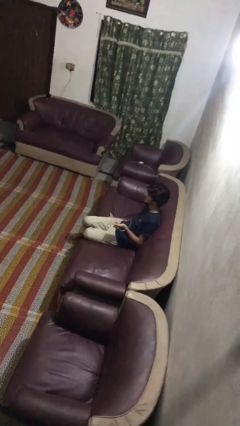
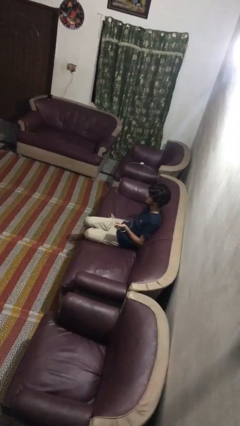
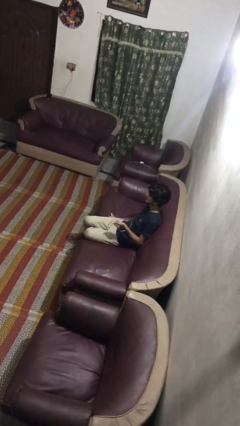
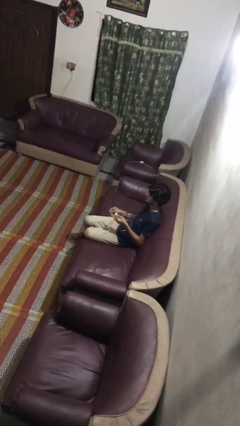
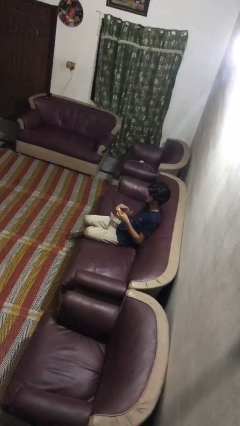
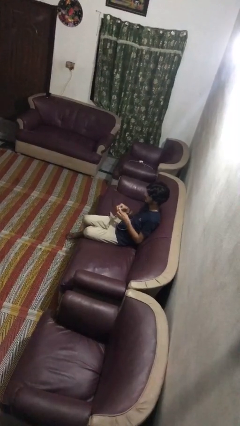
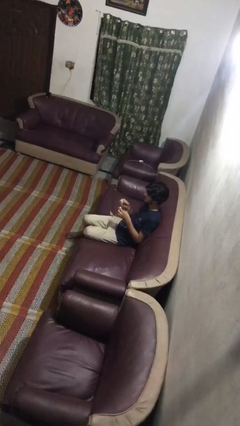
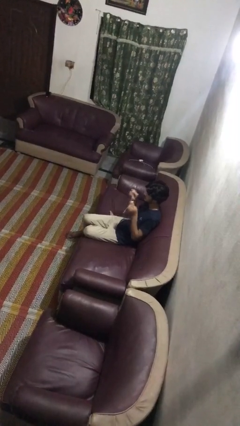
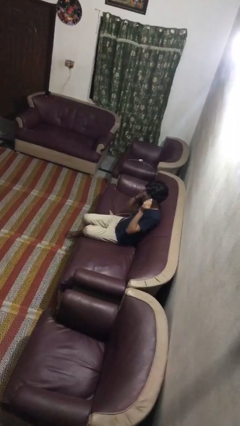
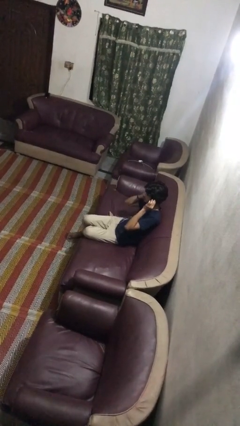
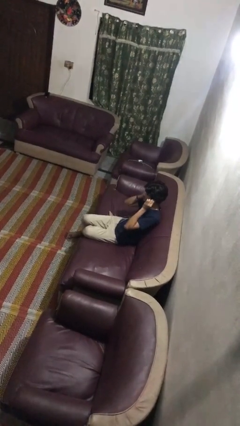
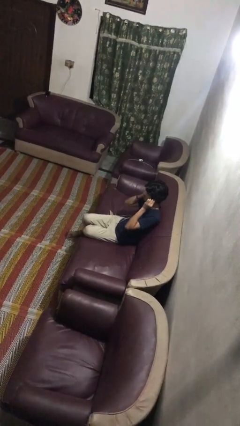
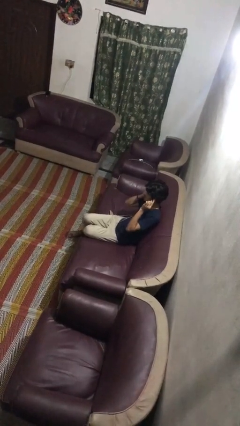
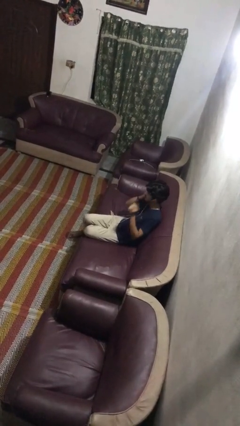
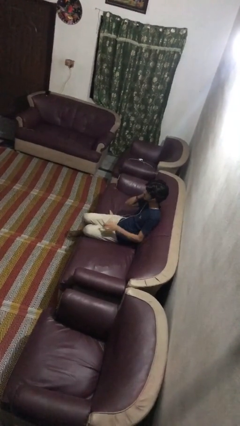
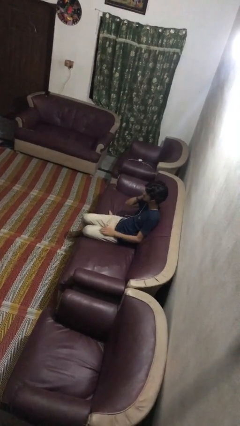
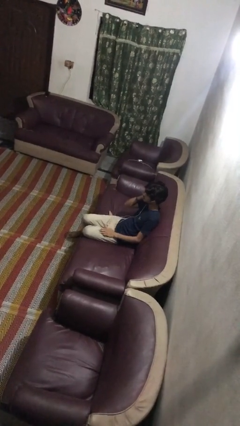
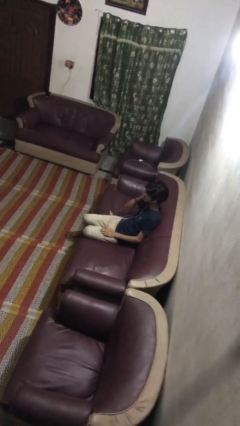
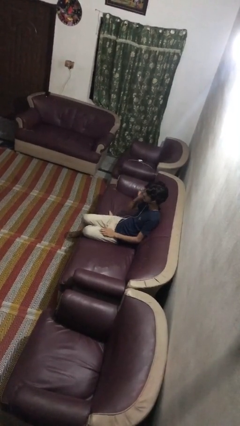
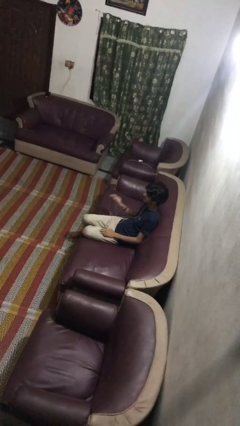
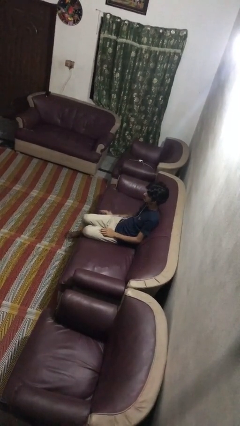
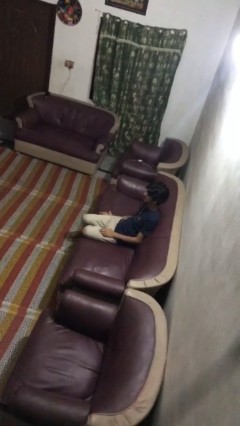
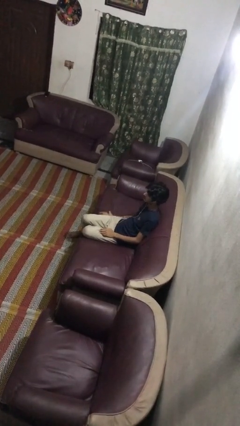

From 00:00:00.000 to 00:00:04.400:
person puts on headphones

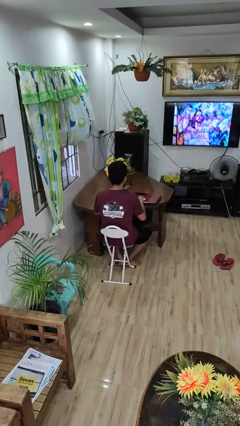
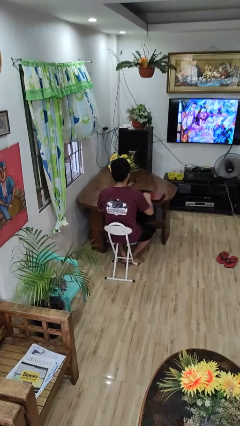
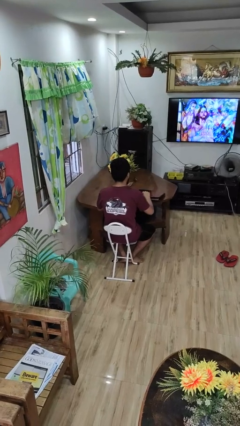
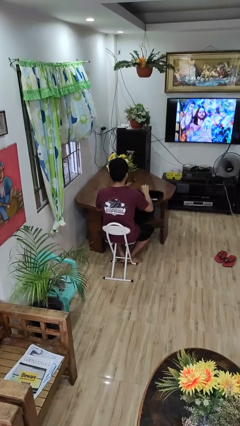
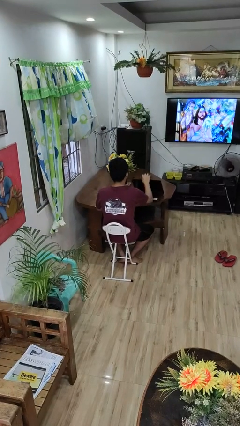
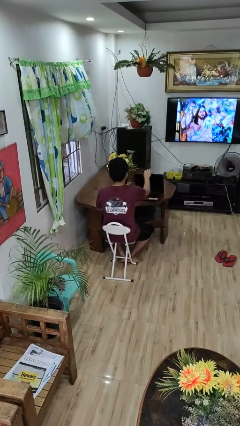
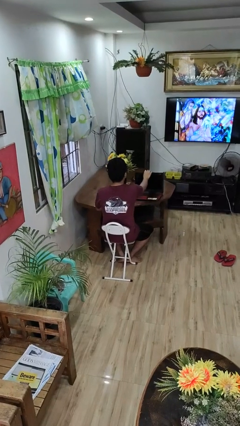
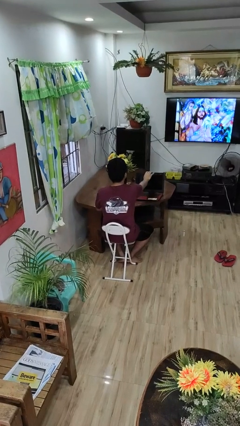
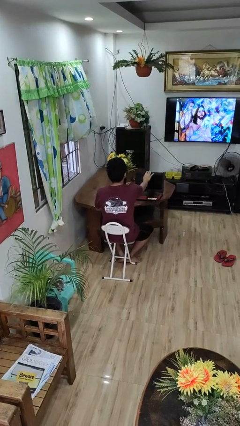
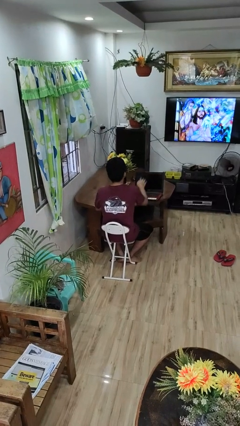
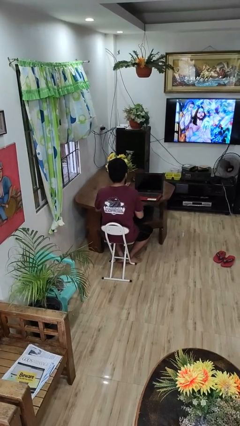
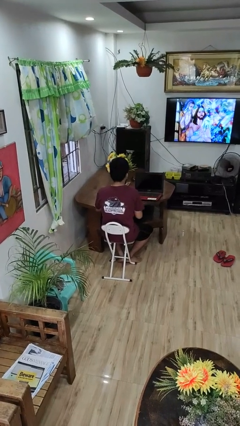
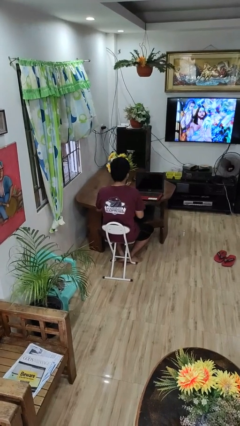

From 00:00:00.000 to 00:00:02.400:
person opens laptop

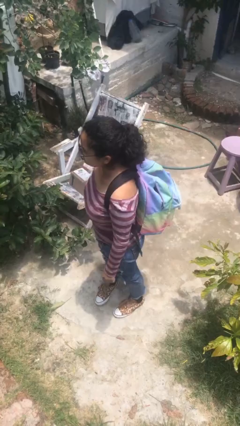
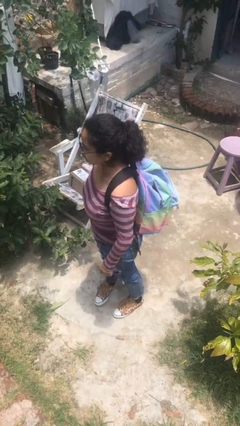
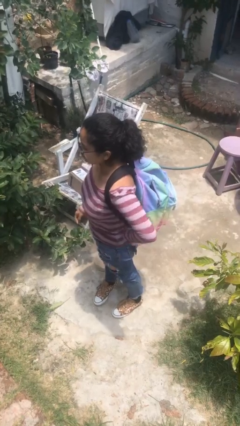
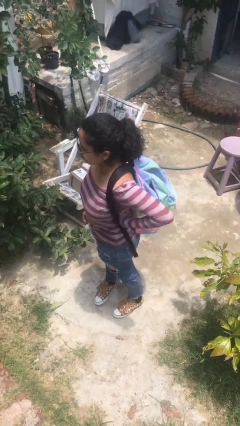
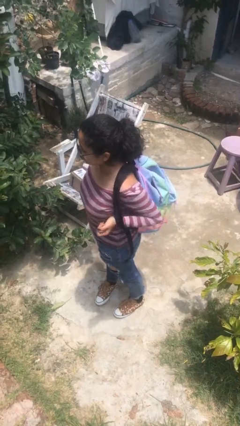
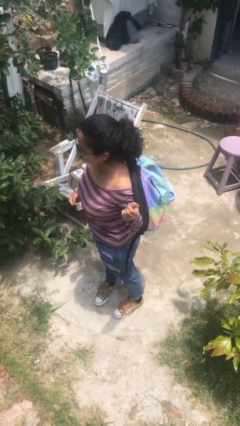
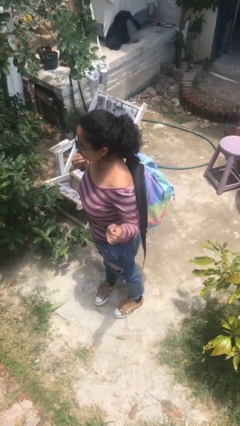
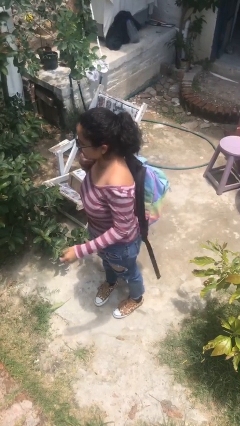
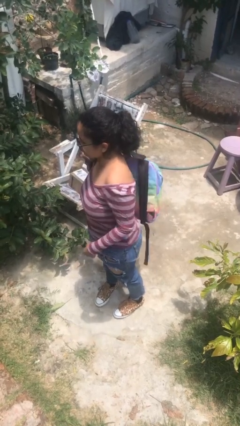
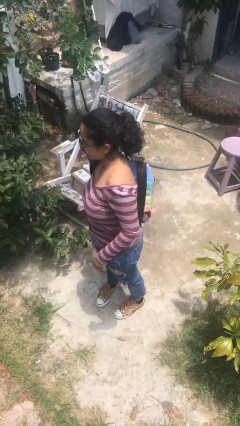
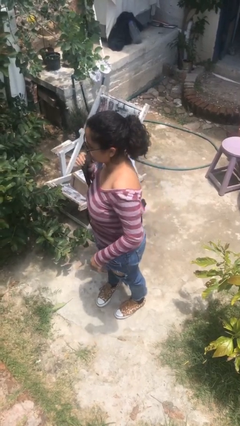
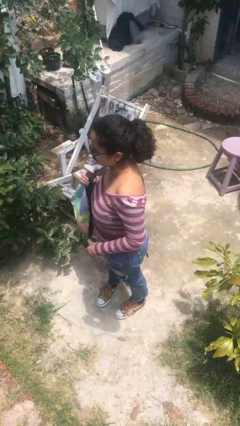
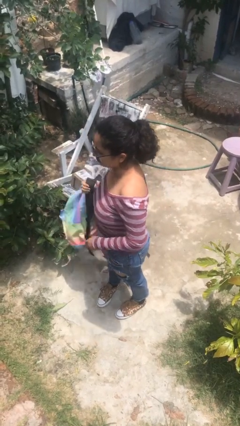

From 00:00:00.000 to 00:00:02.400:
person takes off backpack

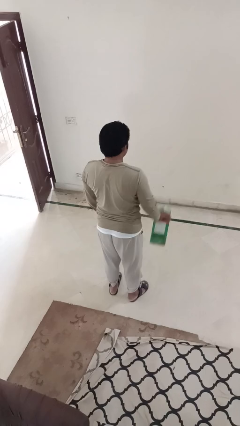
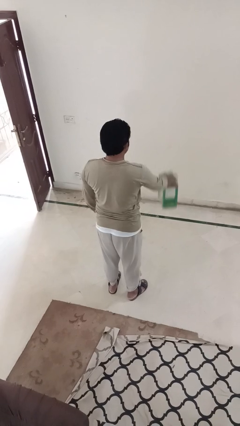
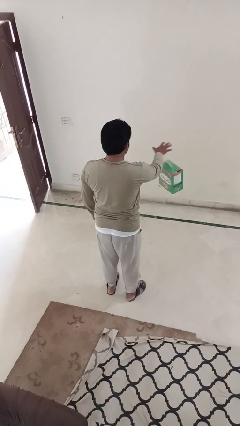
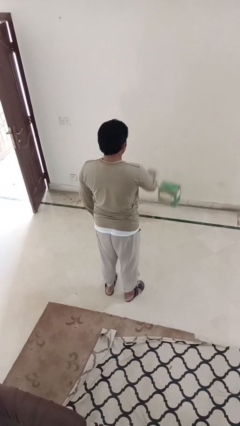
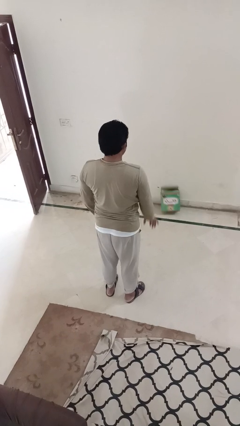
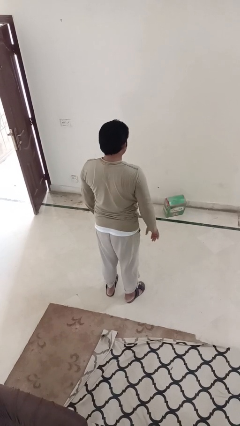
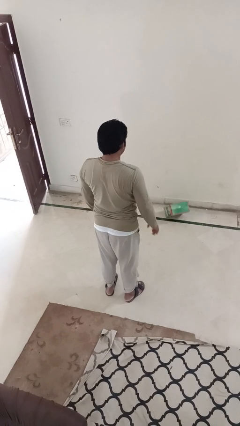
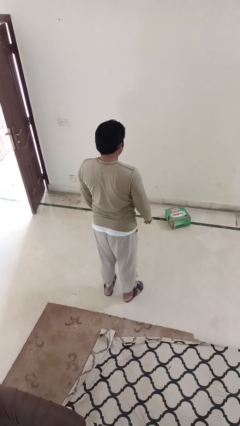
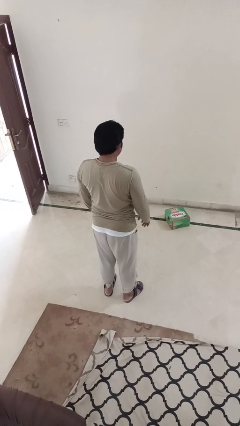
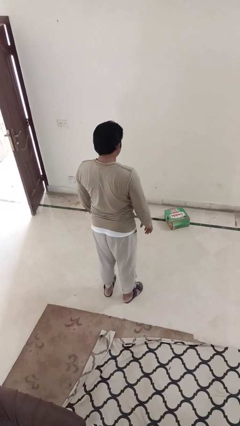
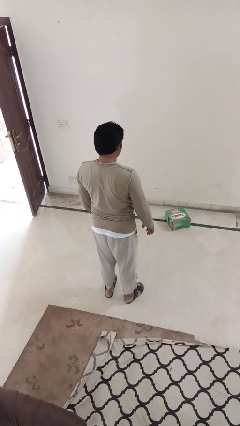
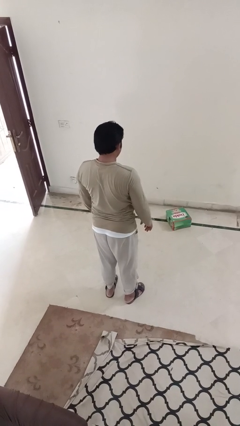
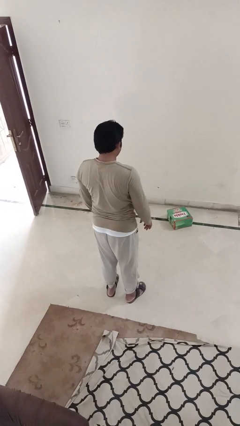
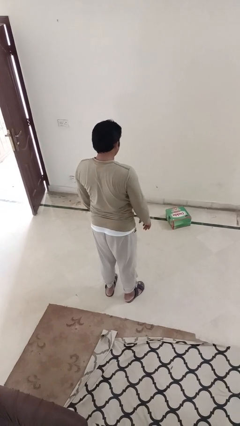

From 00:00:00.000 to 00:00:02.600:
person throws object to ground

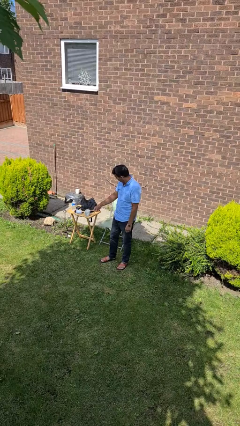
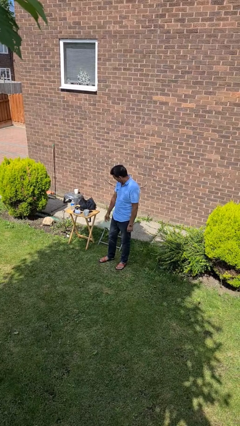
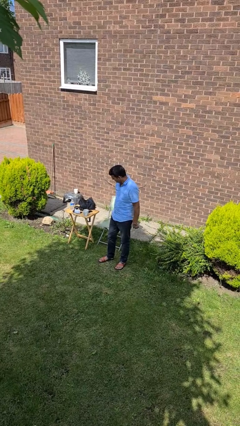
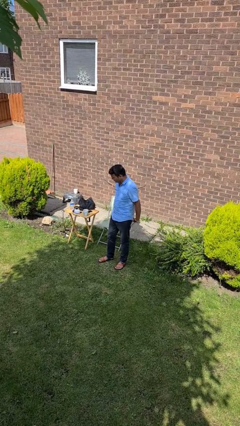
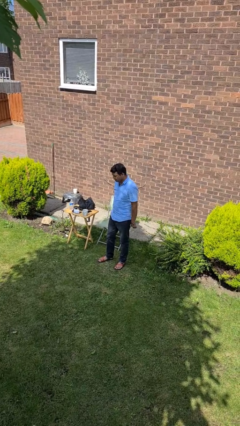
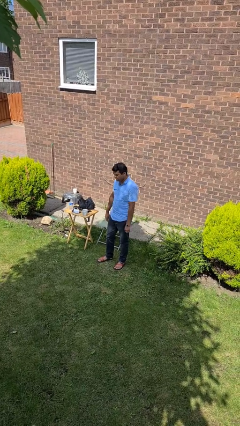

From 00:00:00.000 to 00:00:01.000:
person snaps fingers

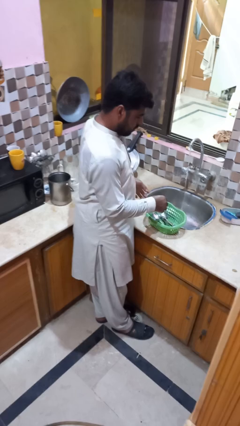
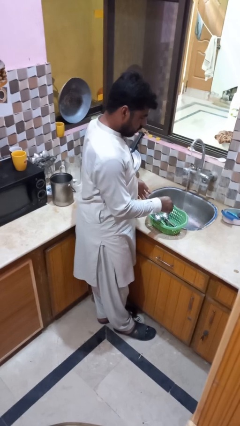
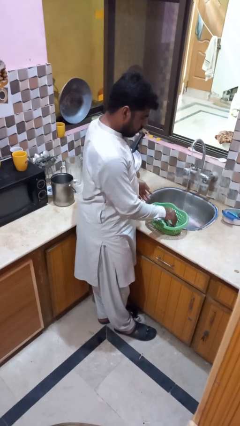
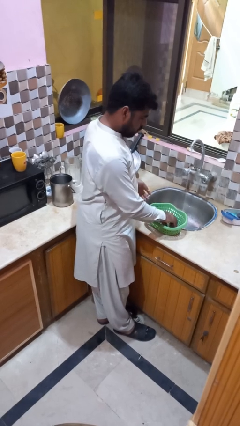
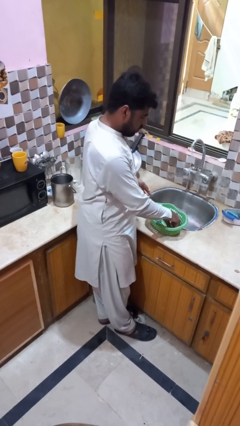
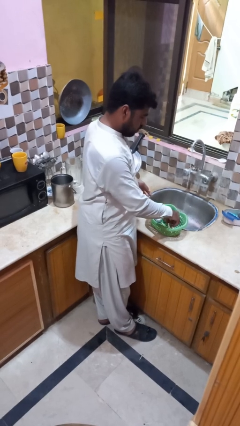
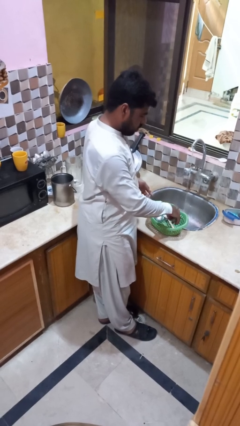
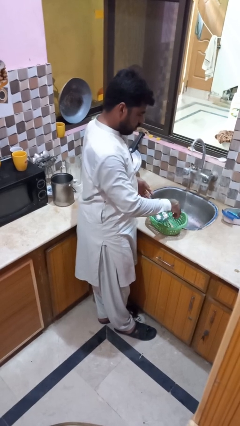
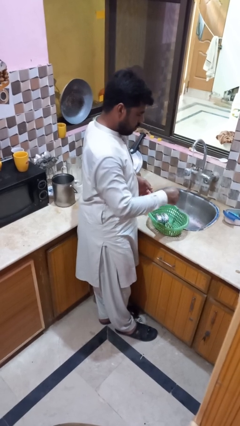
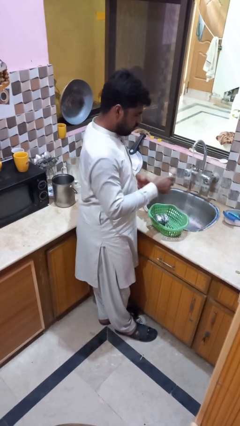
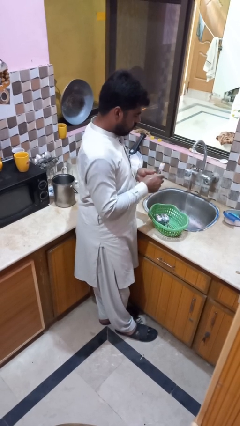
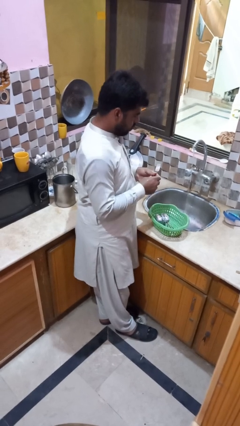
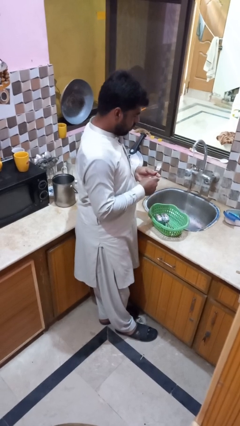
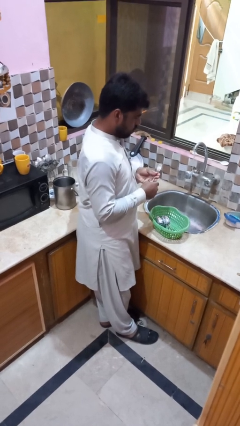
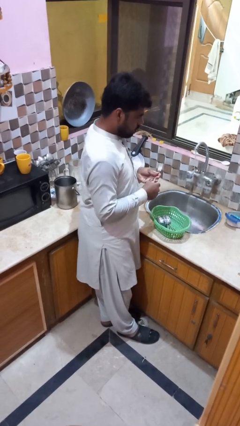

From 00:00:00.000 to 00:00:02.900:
person unloads dishwasher

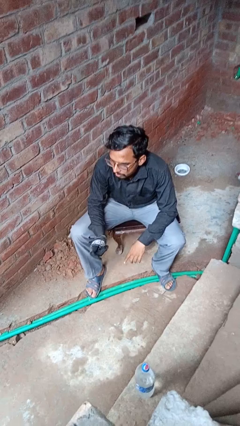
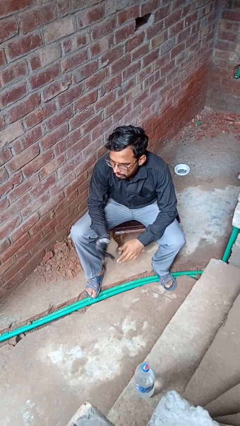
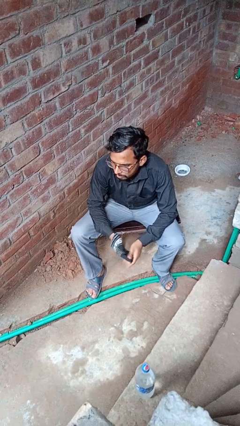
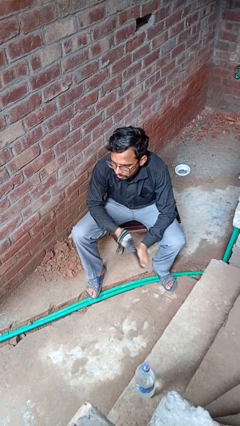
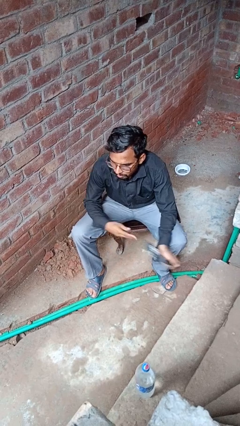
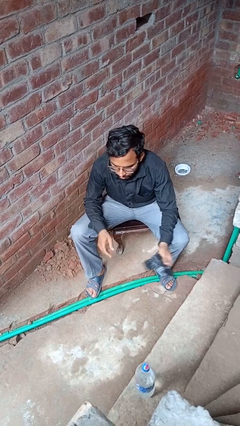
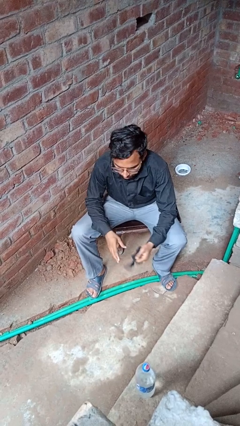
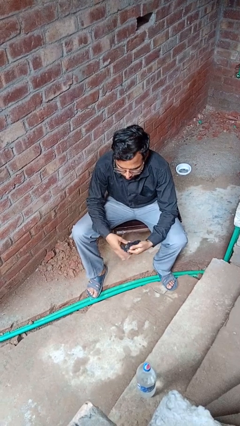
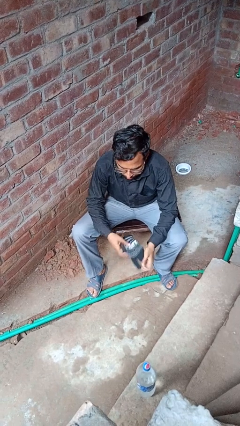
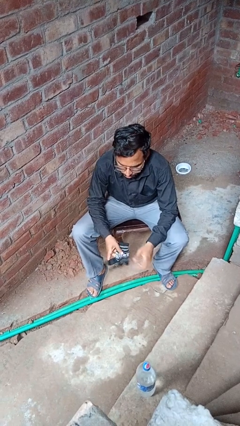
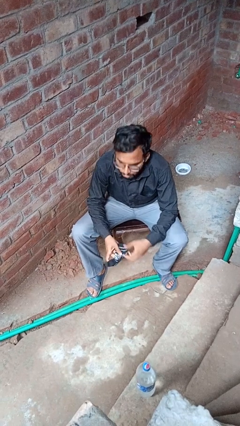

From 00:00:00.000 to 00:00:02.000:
person takes off gloves
